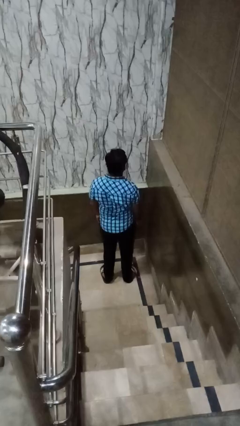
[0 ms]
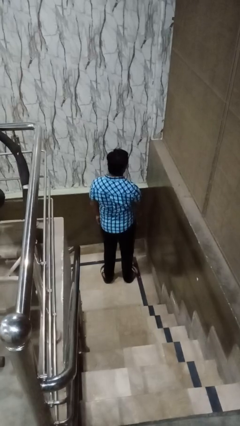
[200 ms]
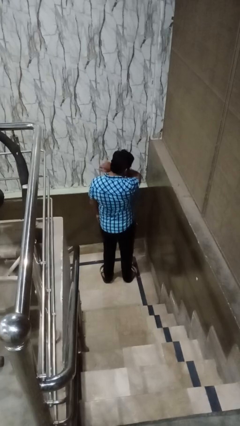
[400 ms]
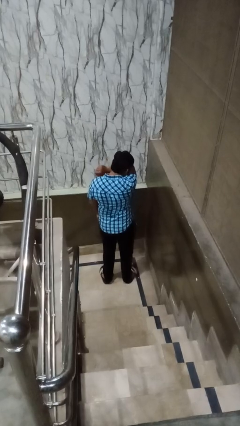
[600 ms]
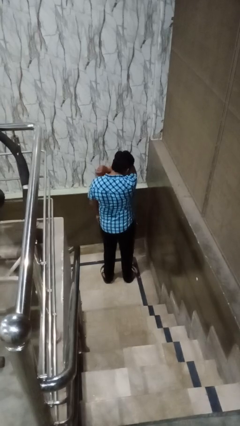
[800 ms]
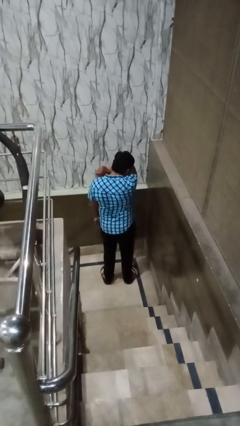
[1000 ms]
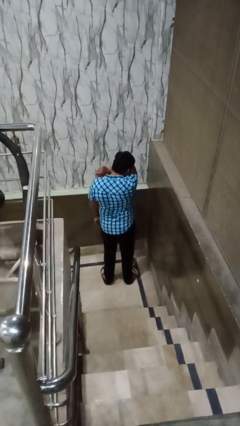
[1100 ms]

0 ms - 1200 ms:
person sneezes into arm

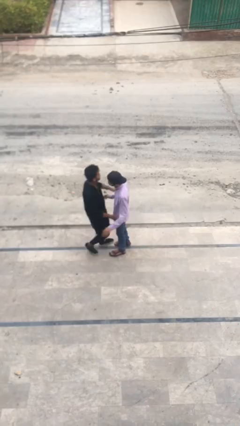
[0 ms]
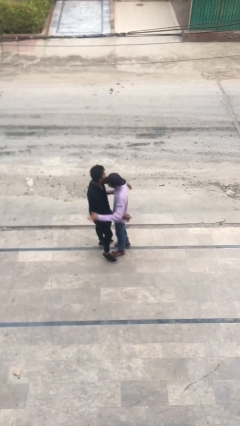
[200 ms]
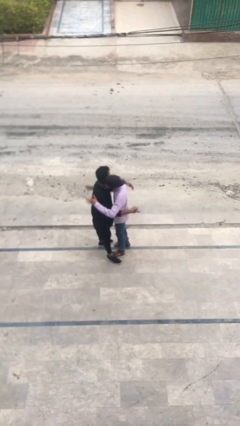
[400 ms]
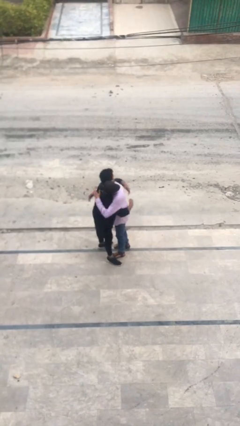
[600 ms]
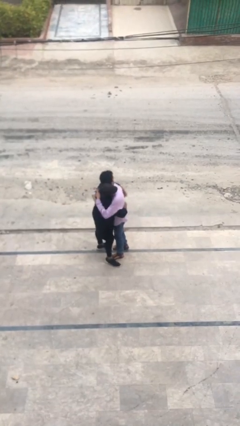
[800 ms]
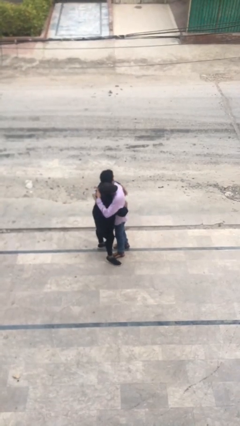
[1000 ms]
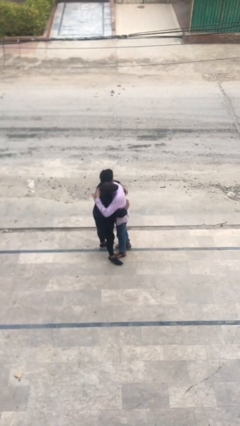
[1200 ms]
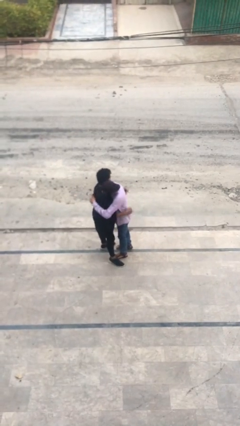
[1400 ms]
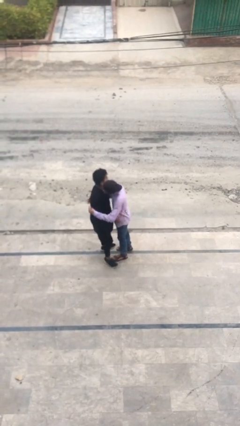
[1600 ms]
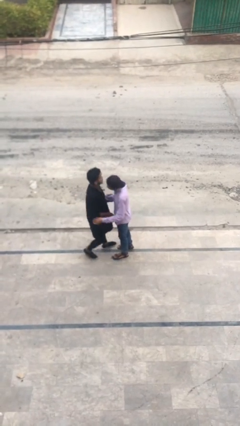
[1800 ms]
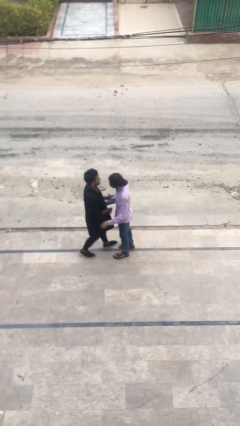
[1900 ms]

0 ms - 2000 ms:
person embraces person

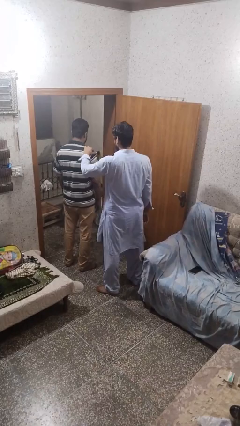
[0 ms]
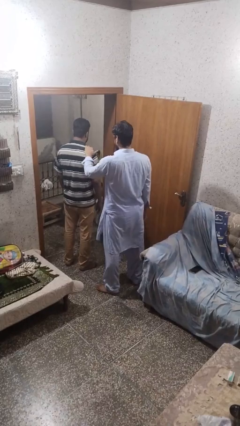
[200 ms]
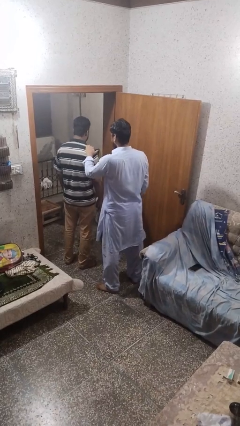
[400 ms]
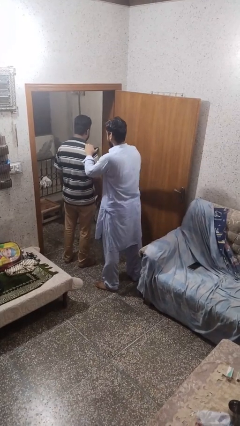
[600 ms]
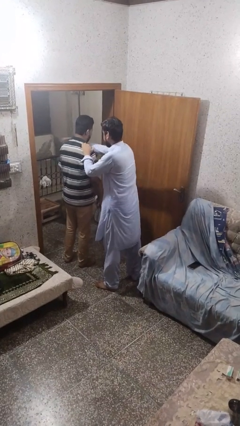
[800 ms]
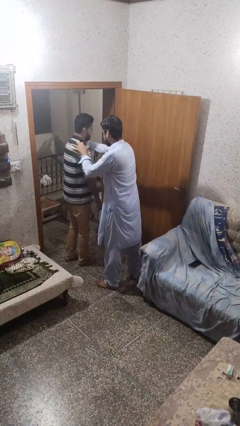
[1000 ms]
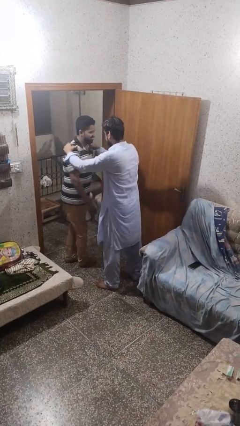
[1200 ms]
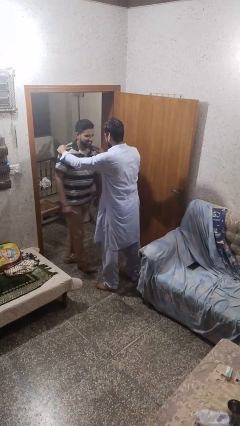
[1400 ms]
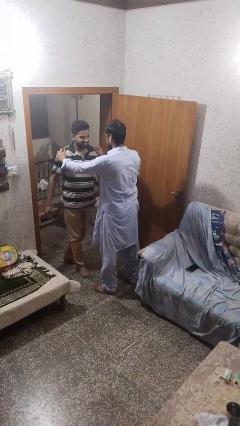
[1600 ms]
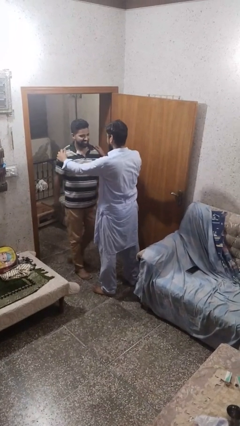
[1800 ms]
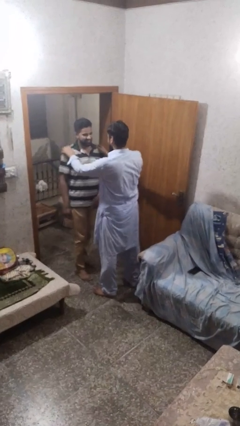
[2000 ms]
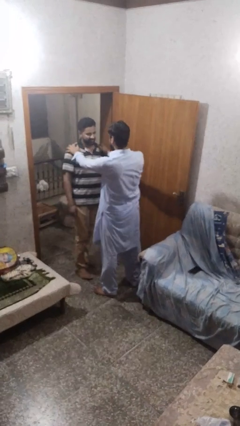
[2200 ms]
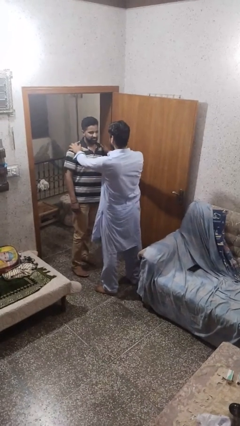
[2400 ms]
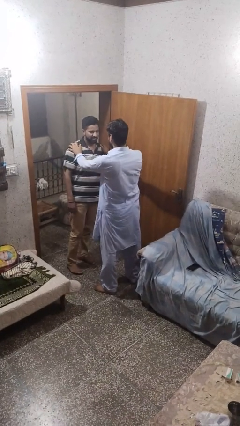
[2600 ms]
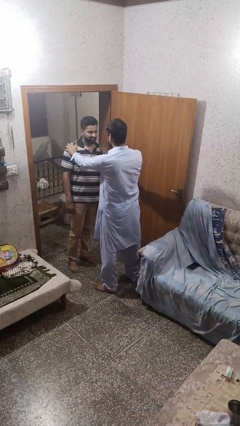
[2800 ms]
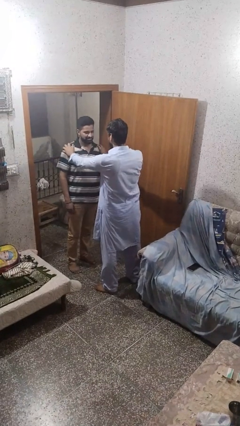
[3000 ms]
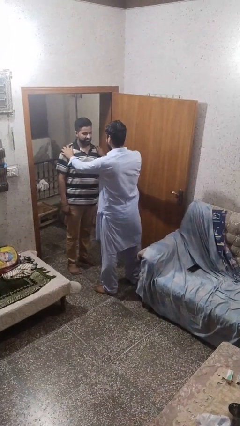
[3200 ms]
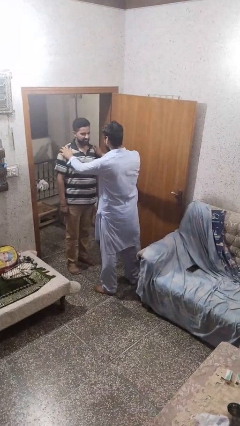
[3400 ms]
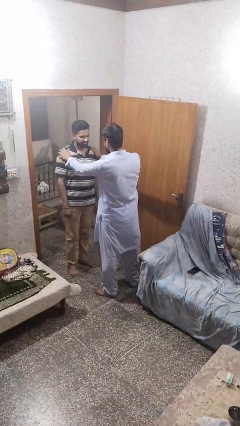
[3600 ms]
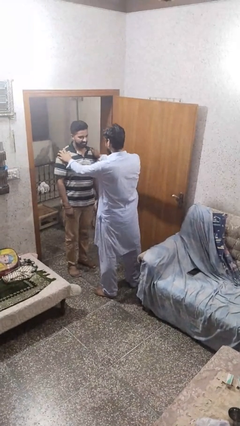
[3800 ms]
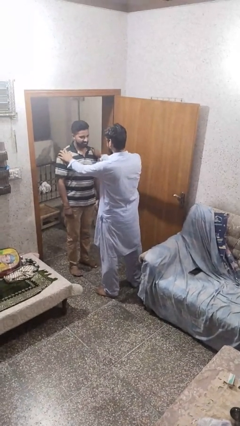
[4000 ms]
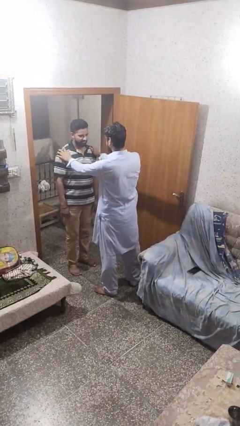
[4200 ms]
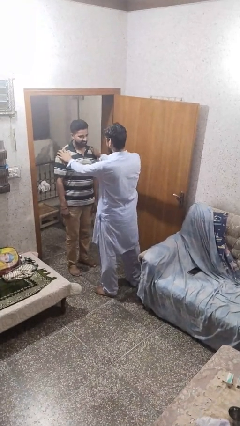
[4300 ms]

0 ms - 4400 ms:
person spins person around

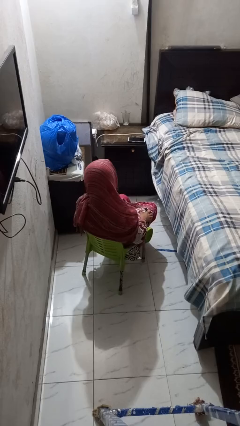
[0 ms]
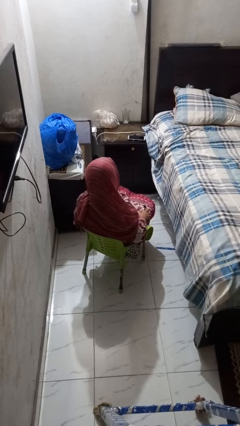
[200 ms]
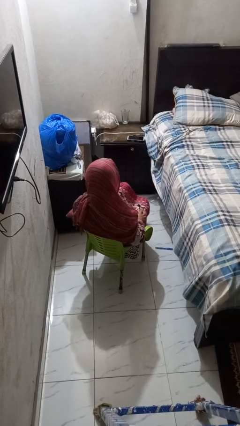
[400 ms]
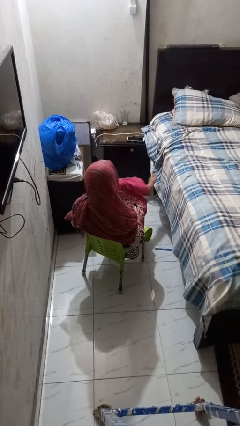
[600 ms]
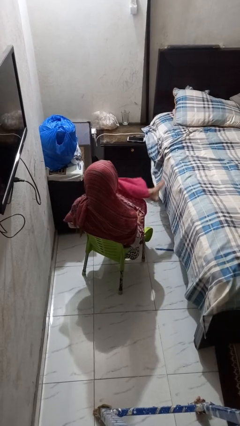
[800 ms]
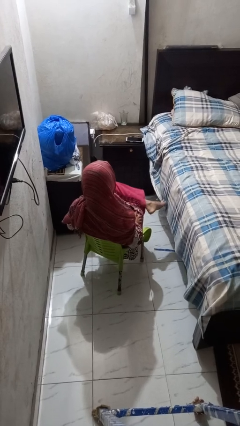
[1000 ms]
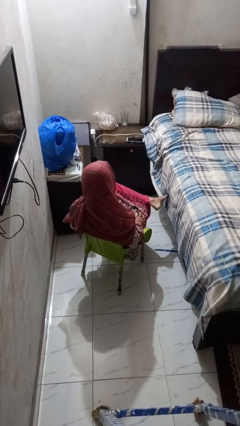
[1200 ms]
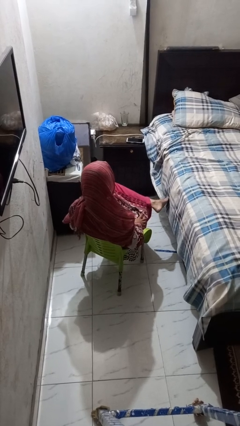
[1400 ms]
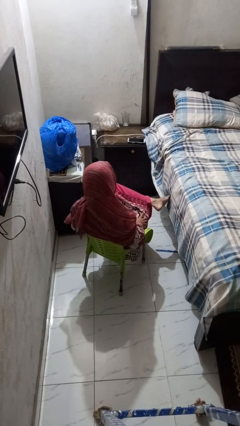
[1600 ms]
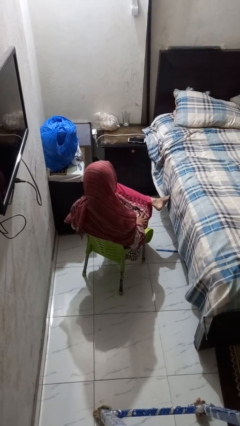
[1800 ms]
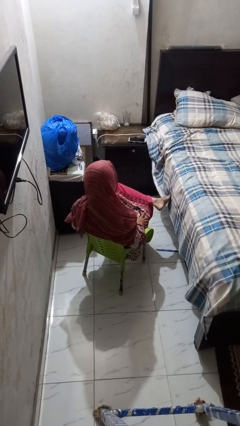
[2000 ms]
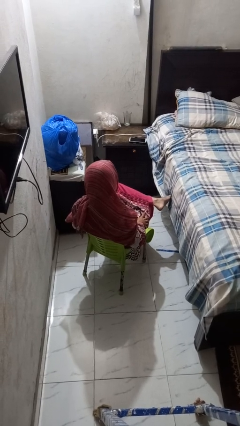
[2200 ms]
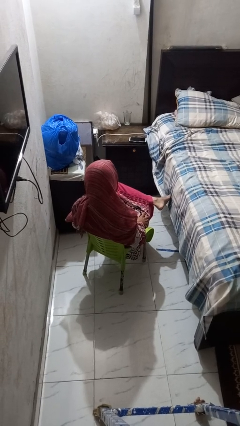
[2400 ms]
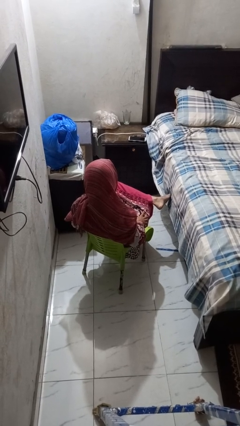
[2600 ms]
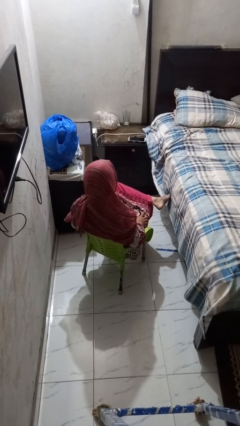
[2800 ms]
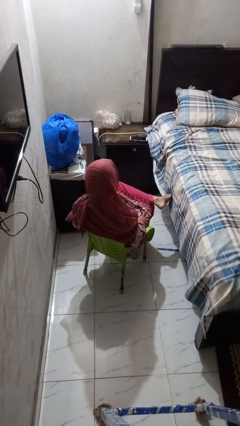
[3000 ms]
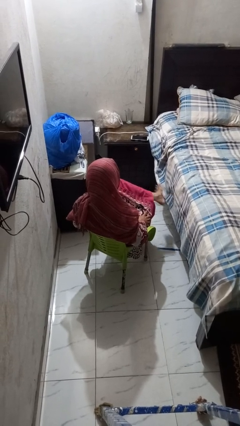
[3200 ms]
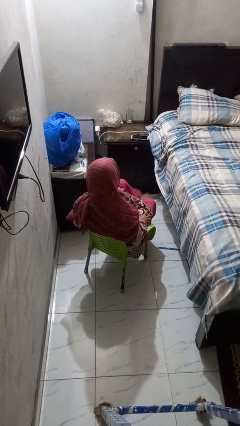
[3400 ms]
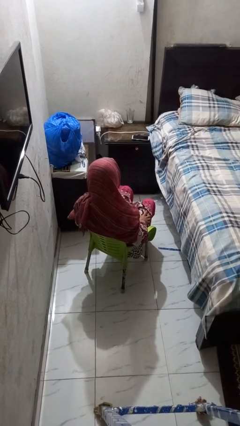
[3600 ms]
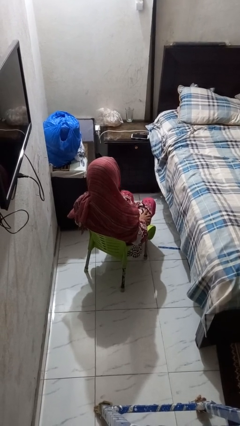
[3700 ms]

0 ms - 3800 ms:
person crosses legs

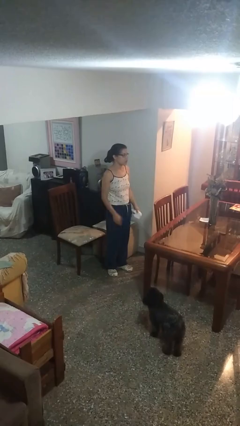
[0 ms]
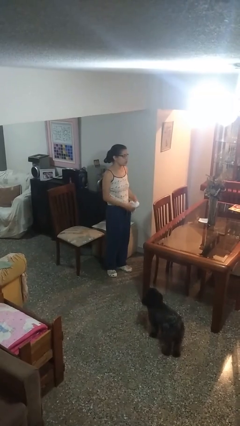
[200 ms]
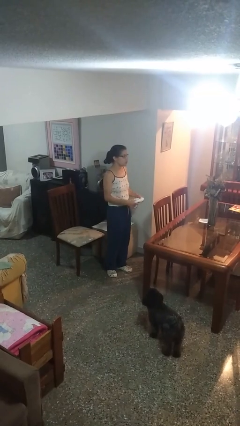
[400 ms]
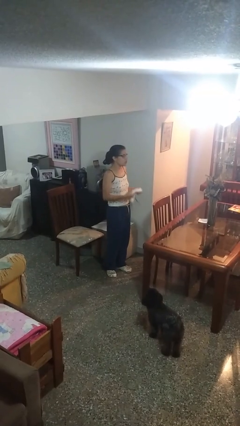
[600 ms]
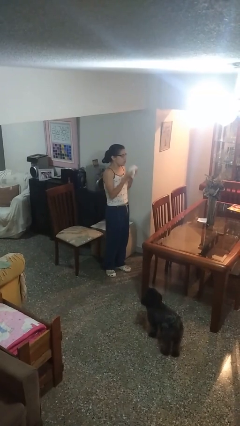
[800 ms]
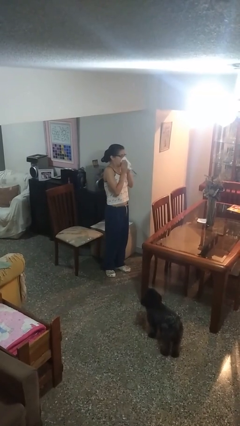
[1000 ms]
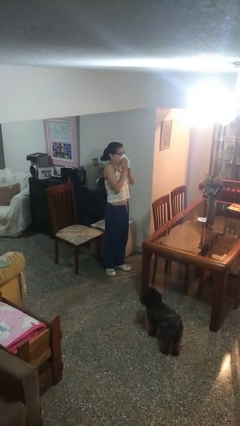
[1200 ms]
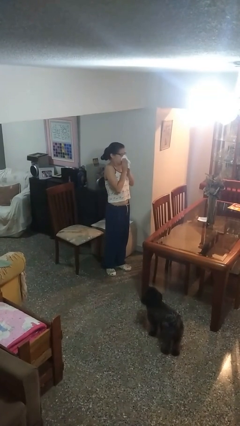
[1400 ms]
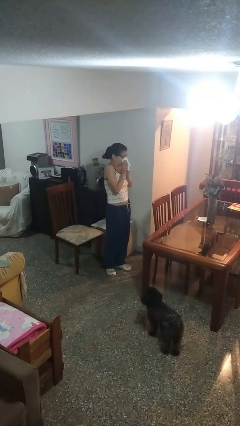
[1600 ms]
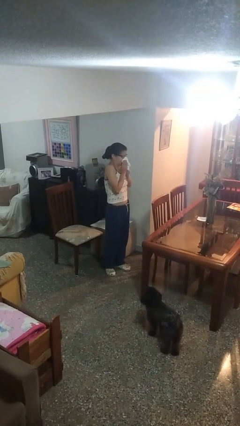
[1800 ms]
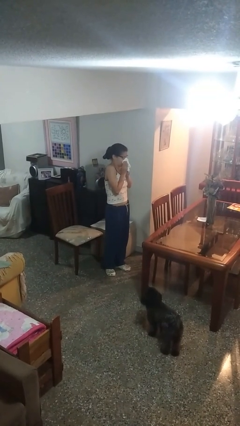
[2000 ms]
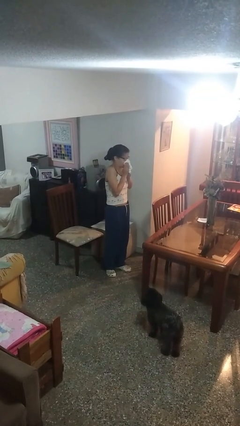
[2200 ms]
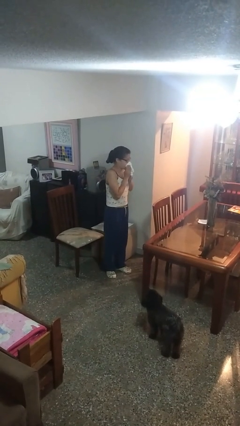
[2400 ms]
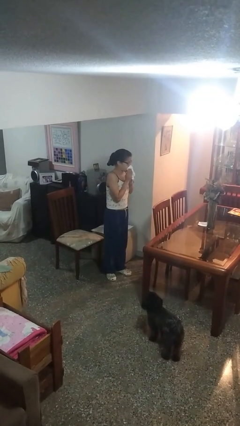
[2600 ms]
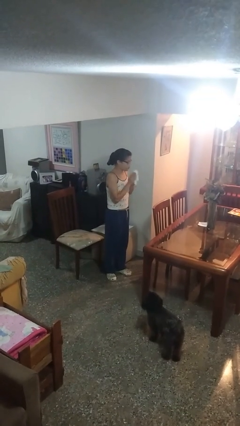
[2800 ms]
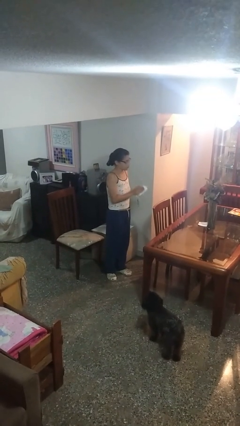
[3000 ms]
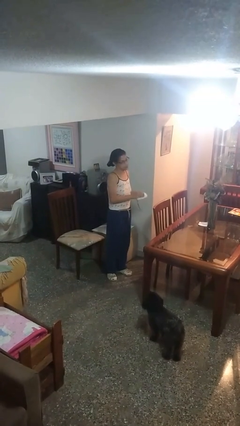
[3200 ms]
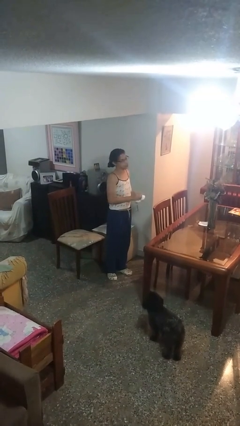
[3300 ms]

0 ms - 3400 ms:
person blows nose

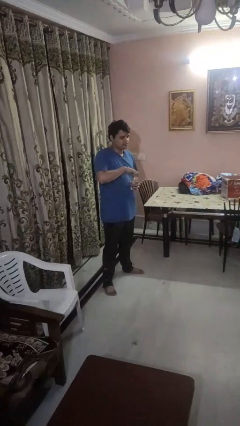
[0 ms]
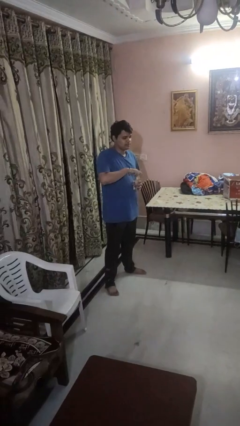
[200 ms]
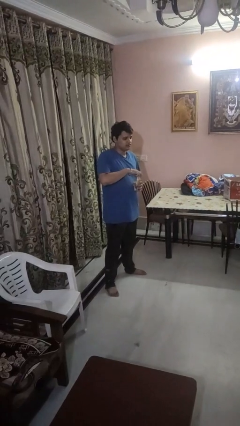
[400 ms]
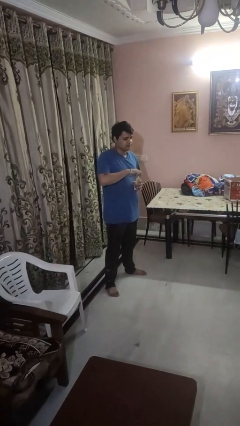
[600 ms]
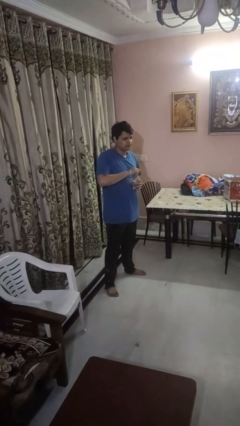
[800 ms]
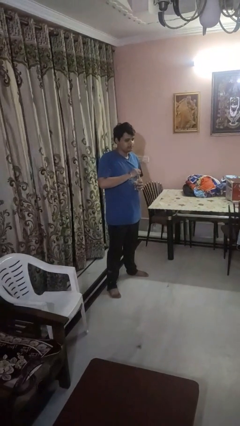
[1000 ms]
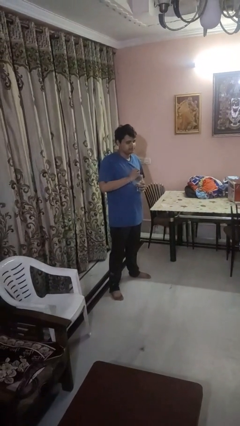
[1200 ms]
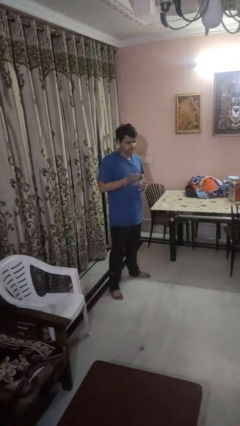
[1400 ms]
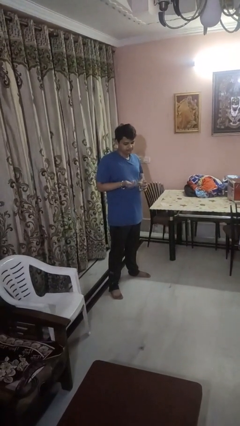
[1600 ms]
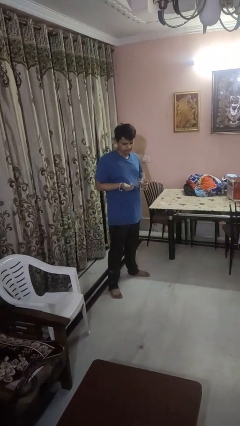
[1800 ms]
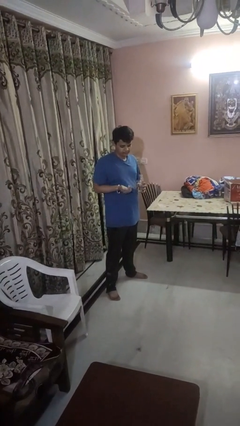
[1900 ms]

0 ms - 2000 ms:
person unscrews lid from bottle

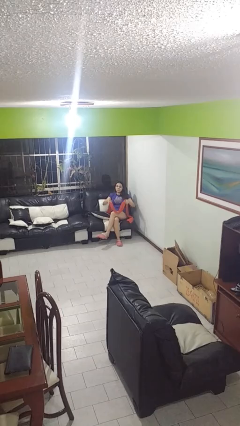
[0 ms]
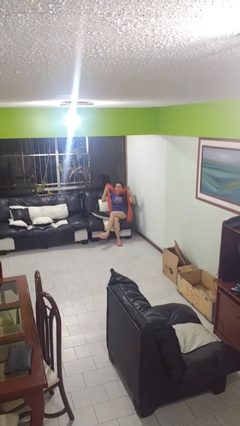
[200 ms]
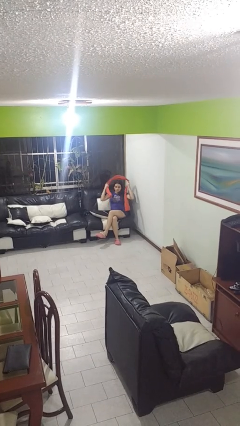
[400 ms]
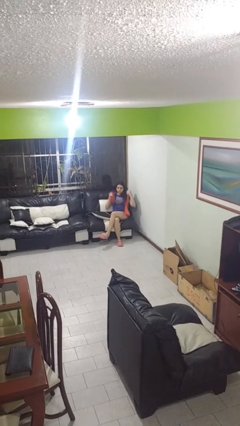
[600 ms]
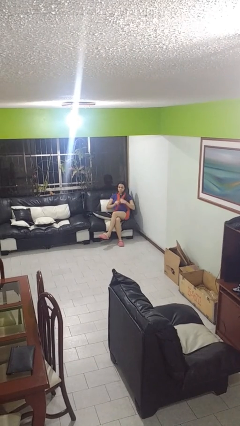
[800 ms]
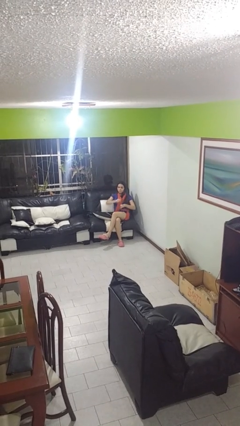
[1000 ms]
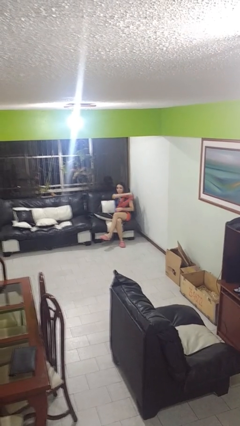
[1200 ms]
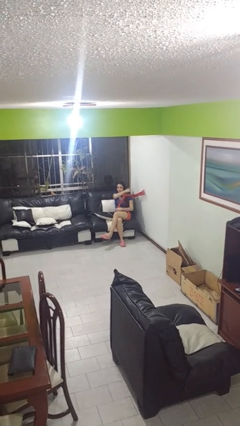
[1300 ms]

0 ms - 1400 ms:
person puts on scarf
